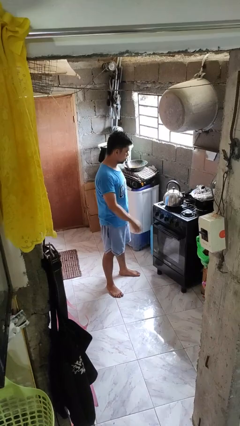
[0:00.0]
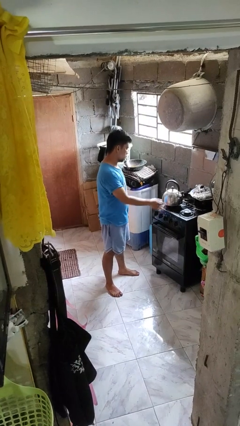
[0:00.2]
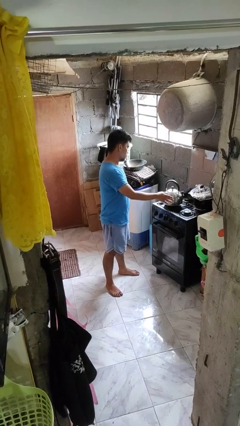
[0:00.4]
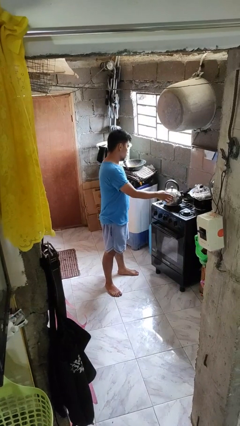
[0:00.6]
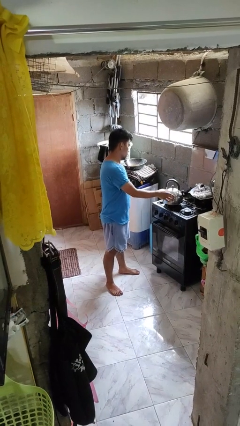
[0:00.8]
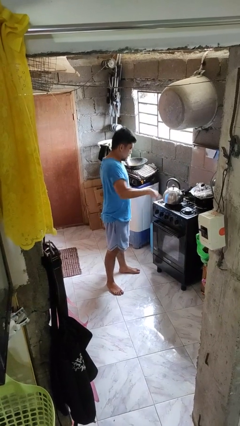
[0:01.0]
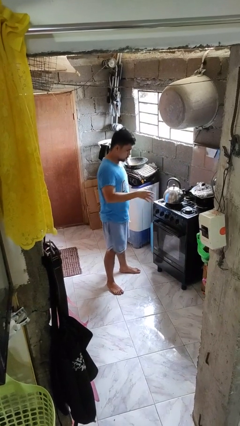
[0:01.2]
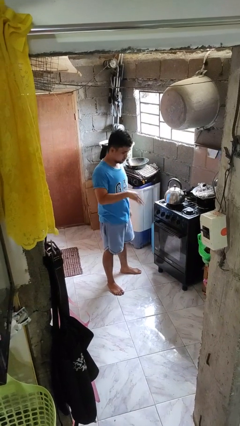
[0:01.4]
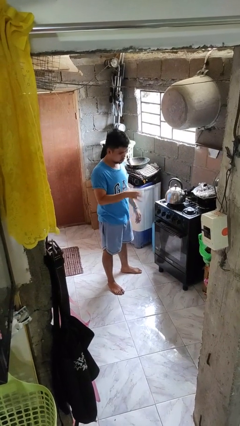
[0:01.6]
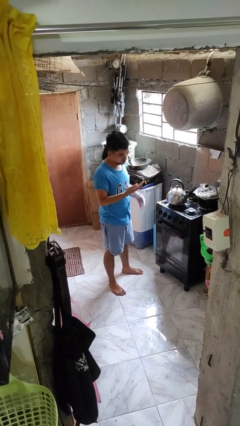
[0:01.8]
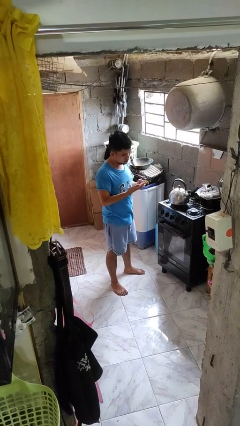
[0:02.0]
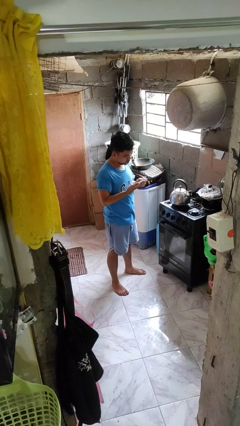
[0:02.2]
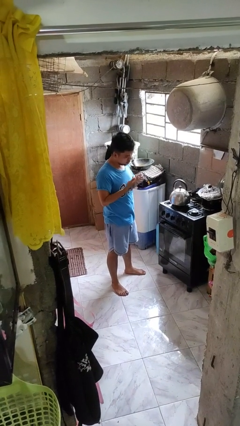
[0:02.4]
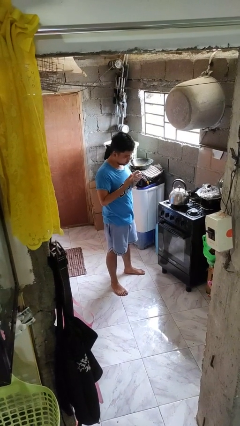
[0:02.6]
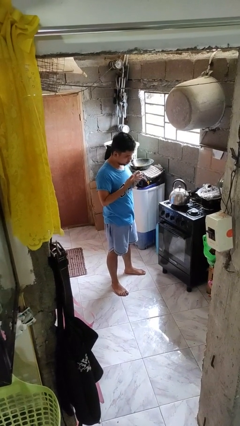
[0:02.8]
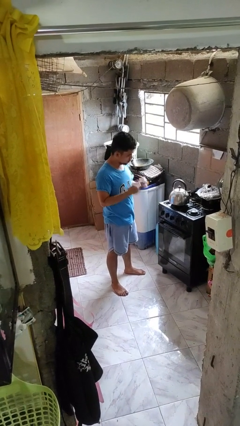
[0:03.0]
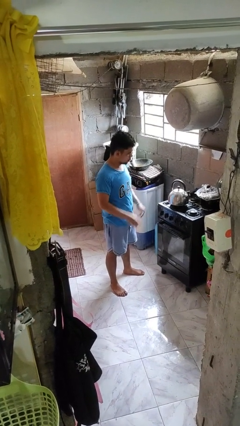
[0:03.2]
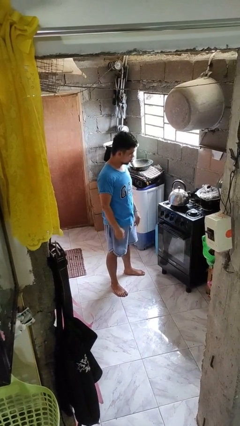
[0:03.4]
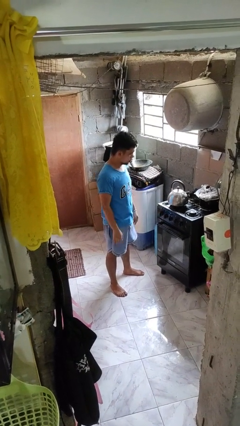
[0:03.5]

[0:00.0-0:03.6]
person burns hand

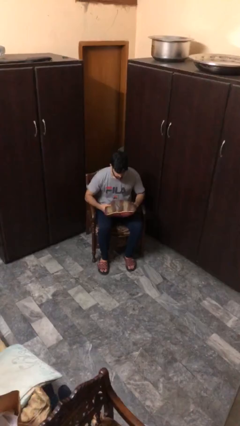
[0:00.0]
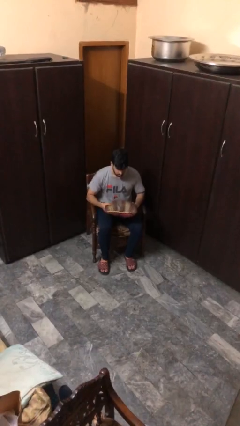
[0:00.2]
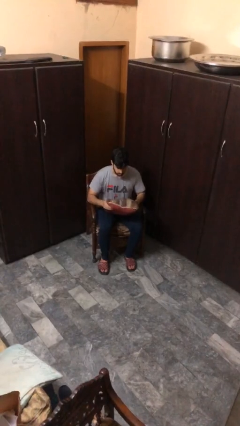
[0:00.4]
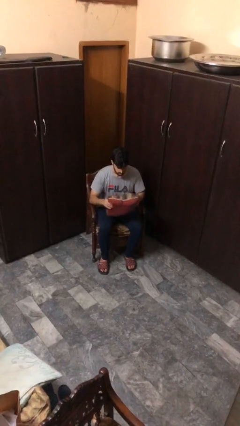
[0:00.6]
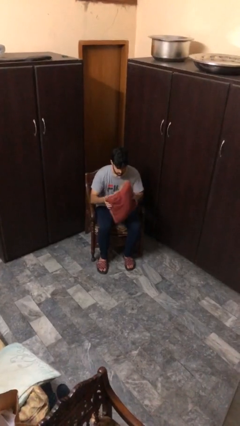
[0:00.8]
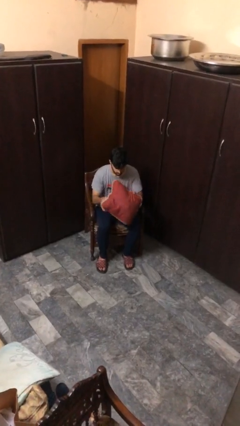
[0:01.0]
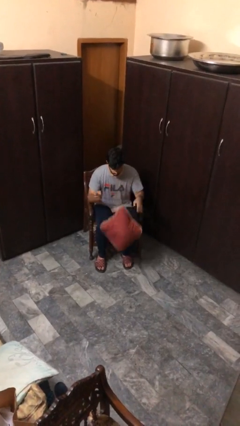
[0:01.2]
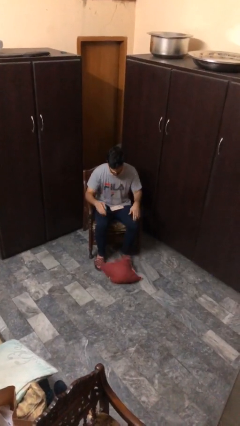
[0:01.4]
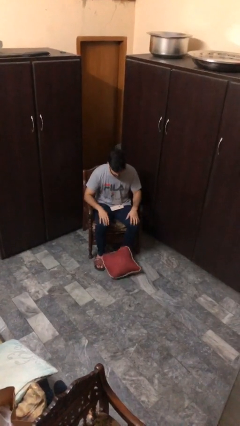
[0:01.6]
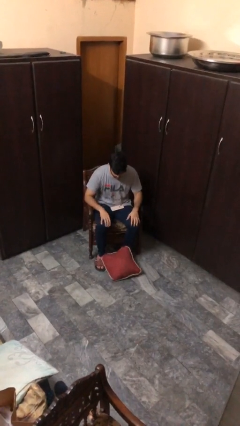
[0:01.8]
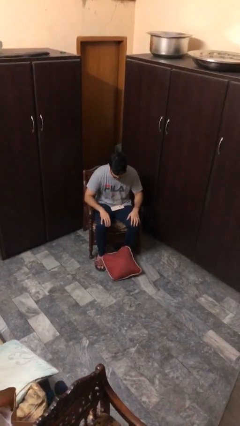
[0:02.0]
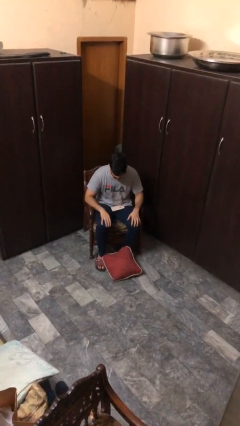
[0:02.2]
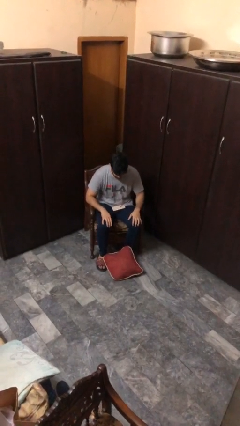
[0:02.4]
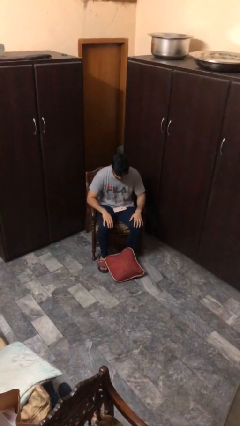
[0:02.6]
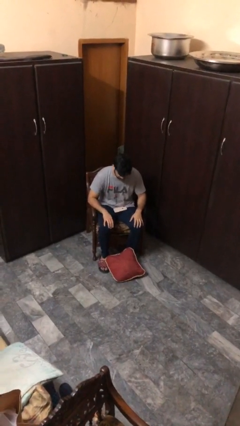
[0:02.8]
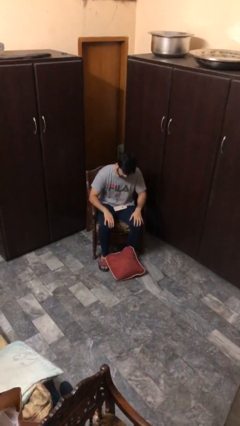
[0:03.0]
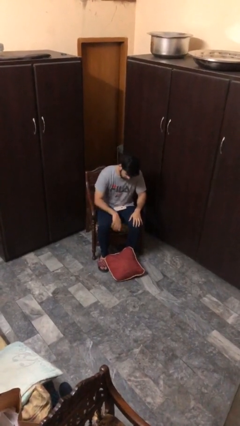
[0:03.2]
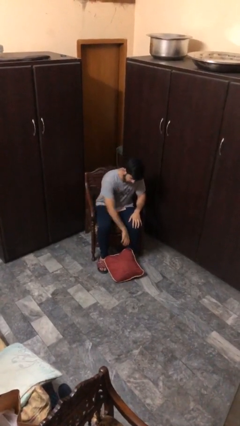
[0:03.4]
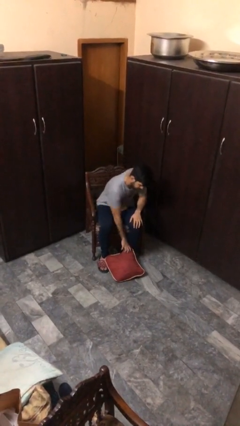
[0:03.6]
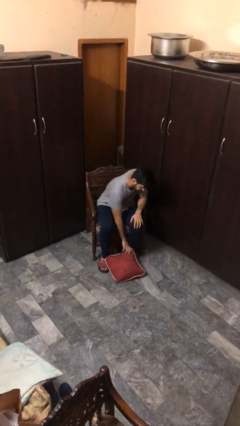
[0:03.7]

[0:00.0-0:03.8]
person drops object

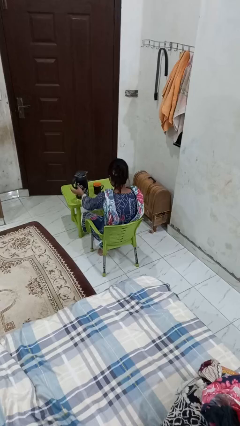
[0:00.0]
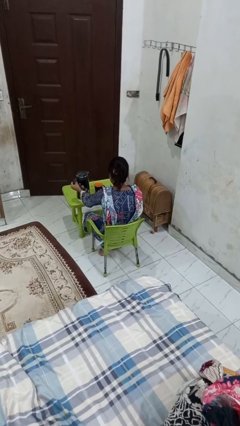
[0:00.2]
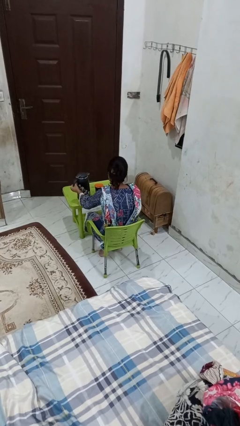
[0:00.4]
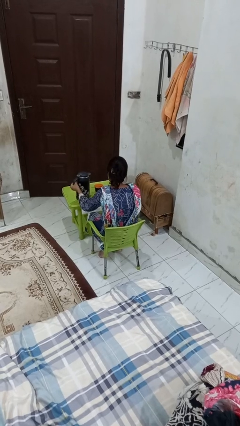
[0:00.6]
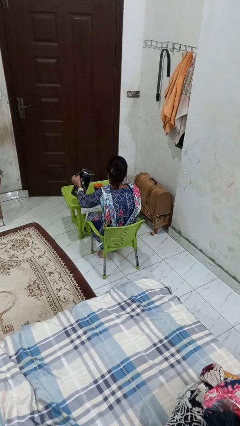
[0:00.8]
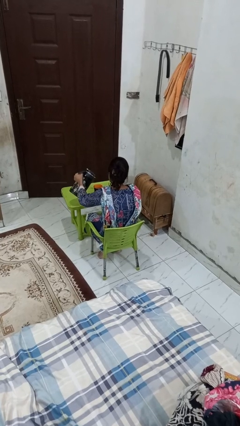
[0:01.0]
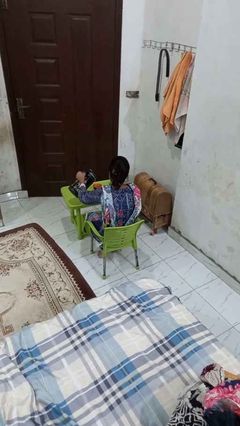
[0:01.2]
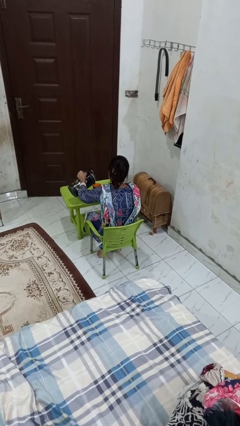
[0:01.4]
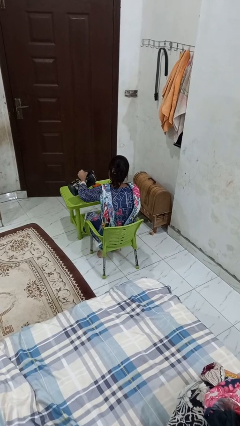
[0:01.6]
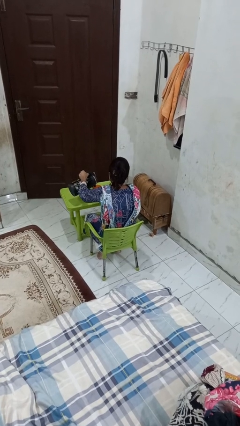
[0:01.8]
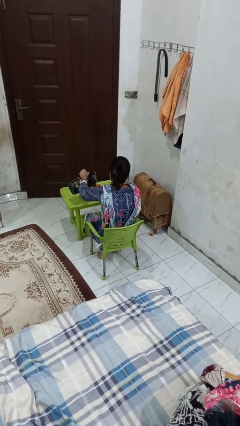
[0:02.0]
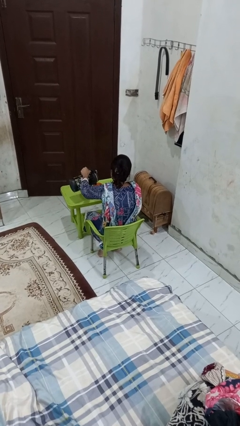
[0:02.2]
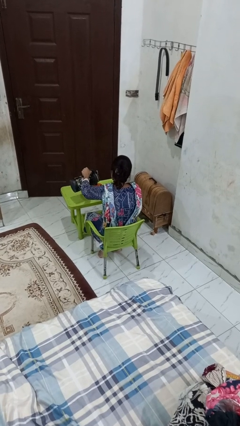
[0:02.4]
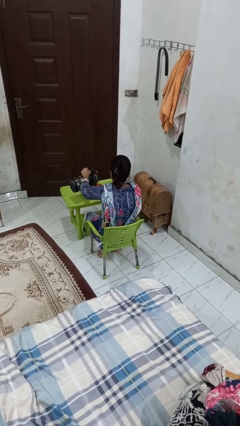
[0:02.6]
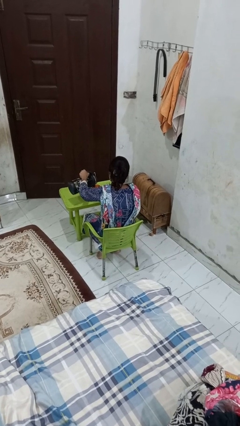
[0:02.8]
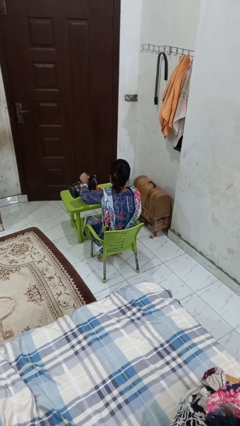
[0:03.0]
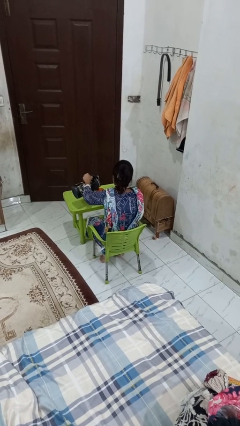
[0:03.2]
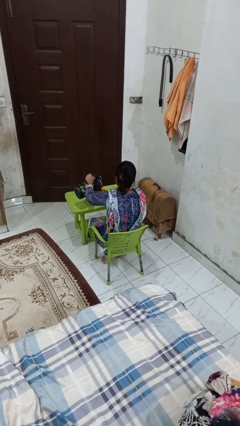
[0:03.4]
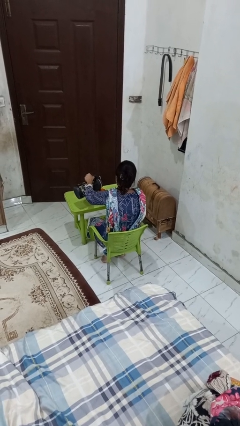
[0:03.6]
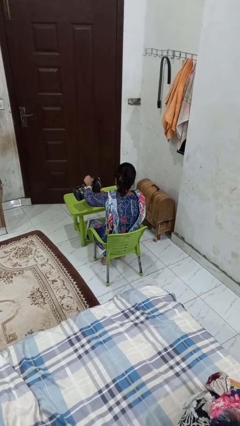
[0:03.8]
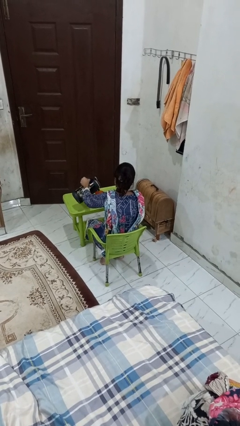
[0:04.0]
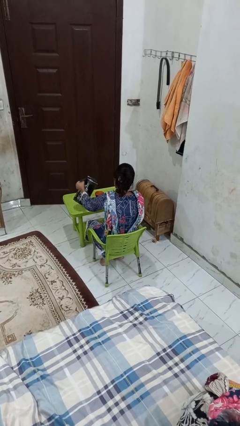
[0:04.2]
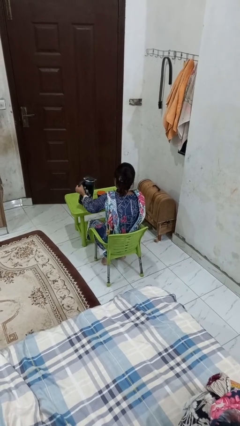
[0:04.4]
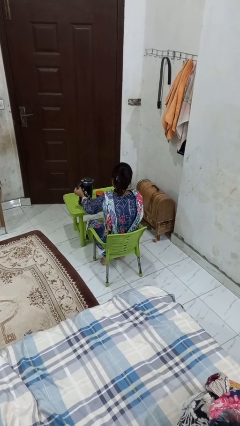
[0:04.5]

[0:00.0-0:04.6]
person pours coffee into mug

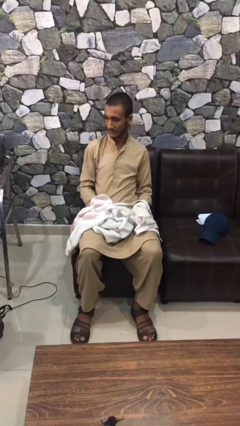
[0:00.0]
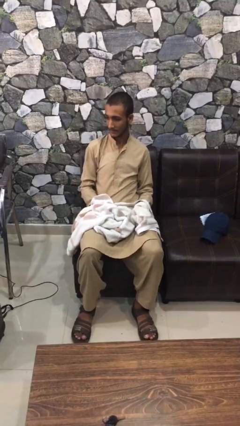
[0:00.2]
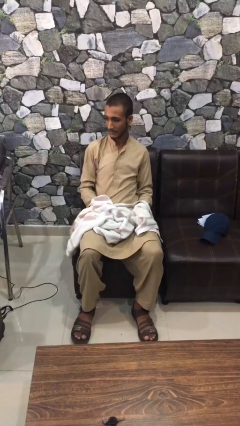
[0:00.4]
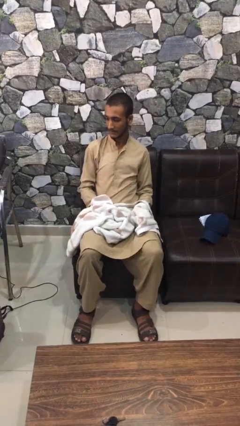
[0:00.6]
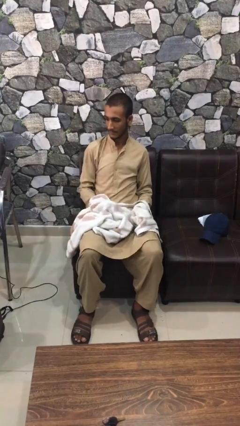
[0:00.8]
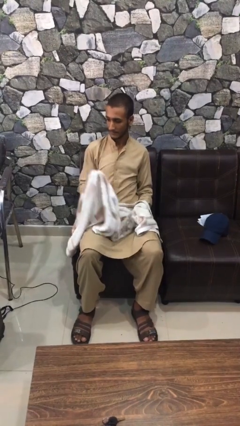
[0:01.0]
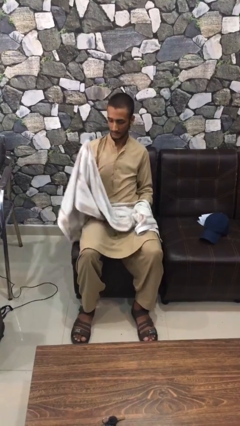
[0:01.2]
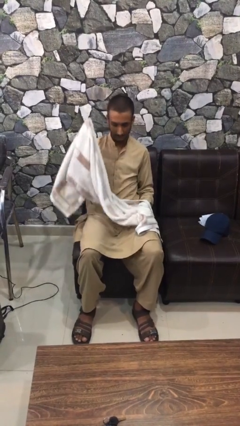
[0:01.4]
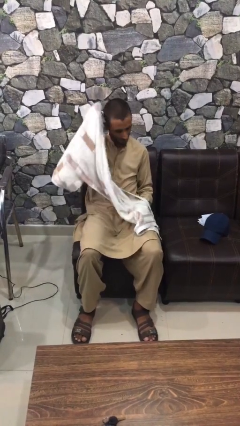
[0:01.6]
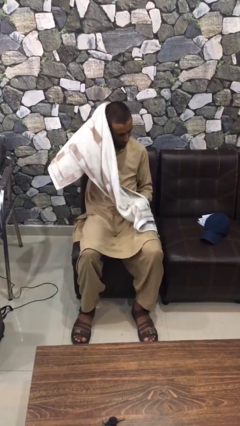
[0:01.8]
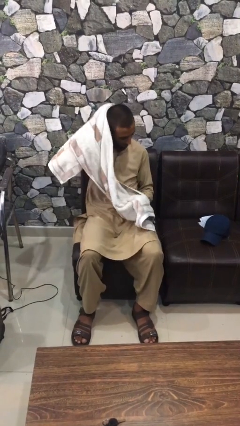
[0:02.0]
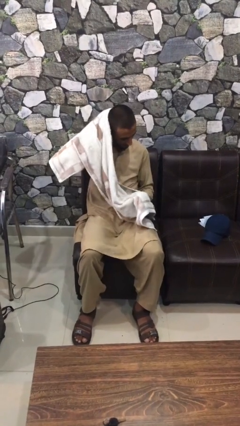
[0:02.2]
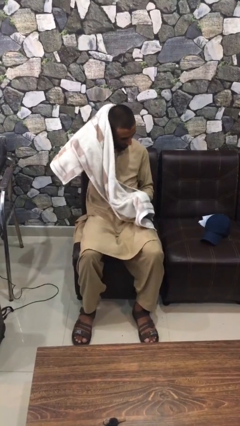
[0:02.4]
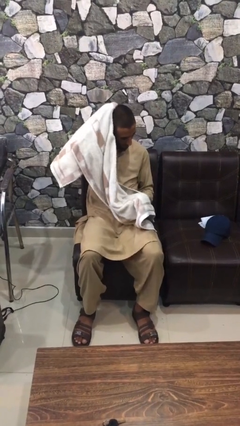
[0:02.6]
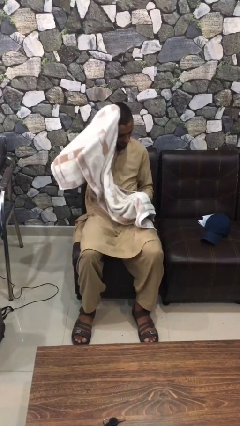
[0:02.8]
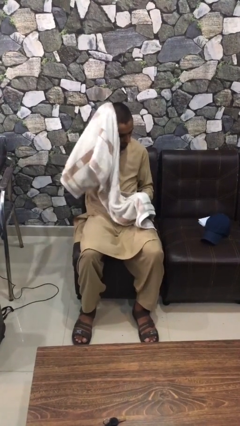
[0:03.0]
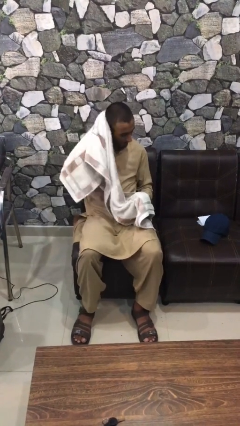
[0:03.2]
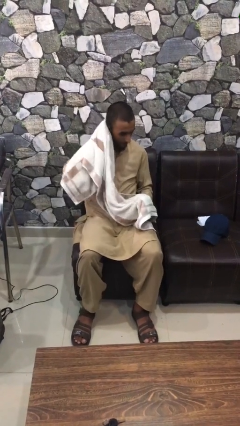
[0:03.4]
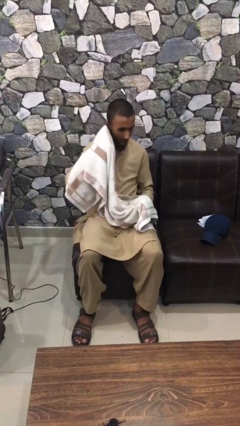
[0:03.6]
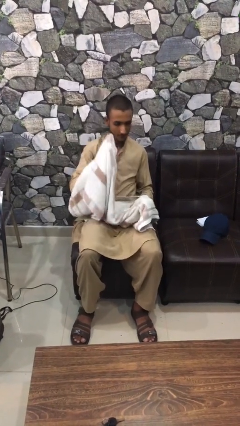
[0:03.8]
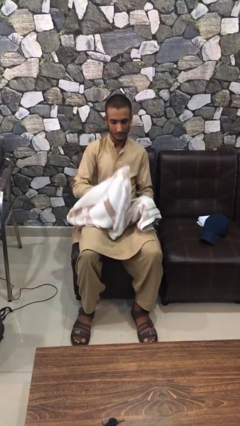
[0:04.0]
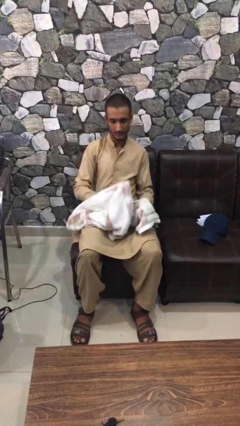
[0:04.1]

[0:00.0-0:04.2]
person dries hair with towel

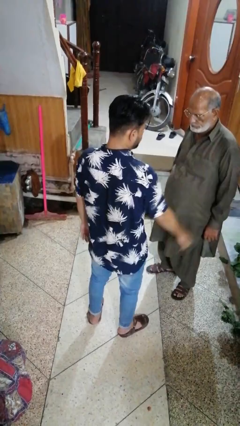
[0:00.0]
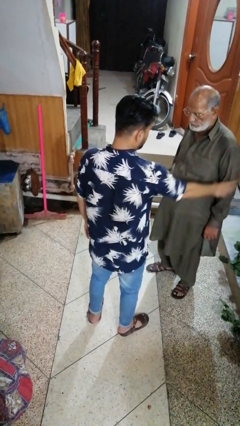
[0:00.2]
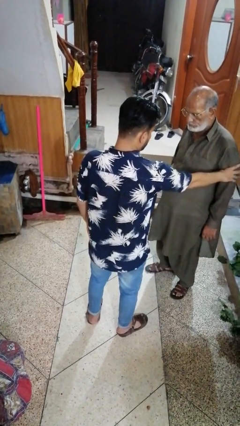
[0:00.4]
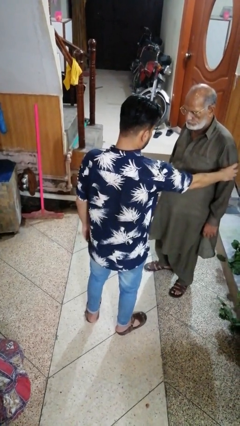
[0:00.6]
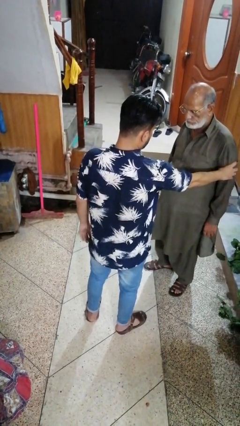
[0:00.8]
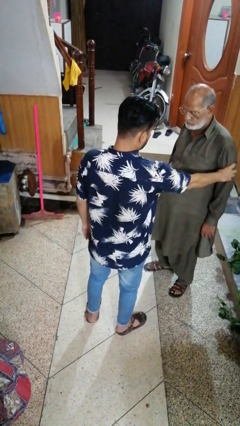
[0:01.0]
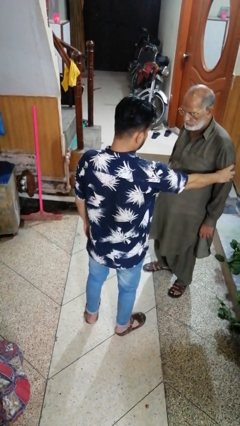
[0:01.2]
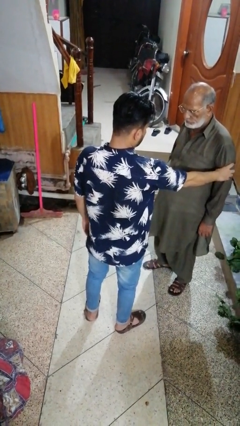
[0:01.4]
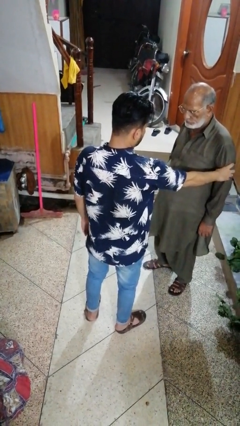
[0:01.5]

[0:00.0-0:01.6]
person grabs person by bicep
